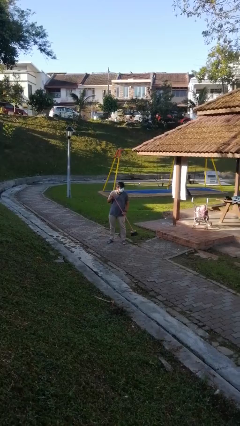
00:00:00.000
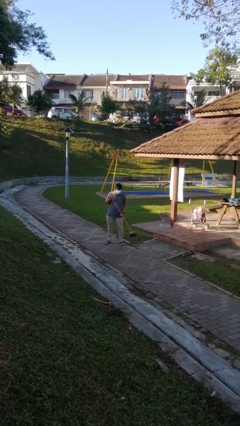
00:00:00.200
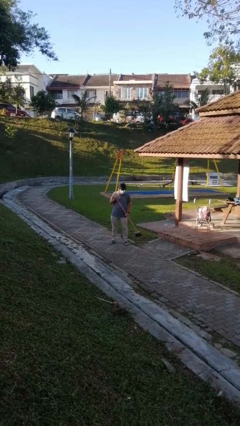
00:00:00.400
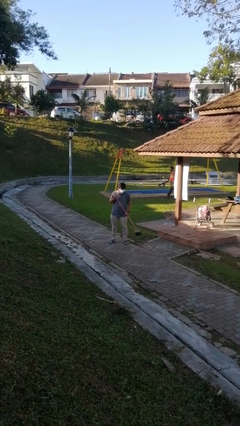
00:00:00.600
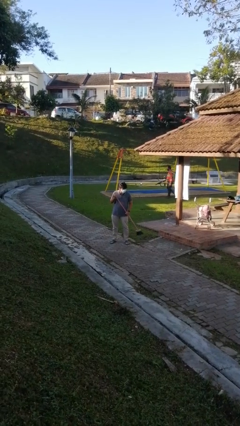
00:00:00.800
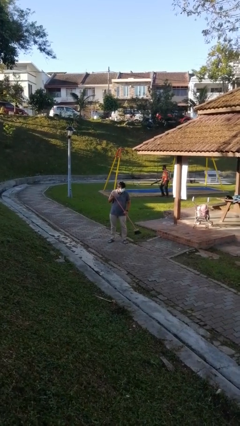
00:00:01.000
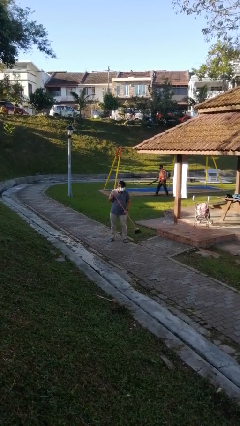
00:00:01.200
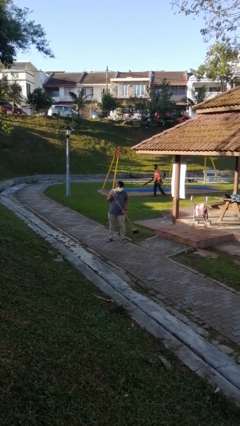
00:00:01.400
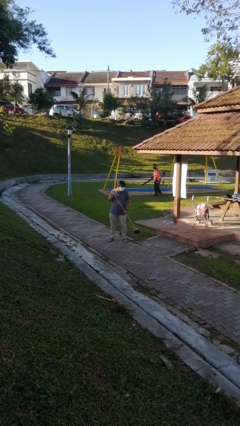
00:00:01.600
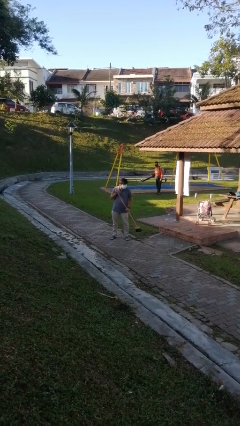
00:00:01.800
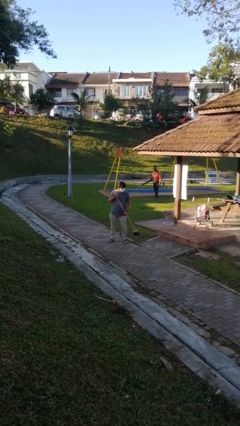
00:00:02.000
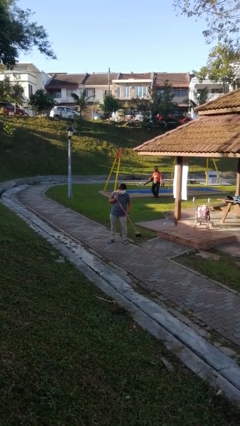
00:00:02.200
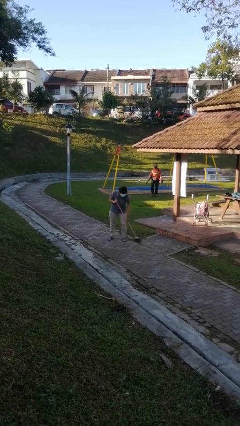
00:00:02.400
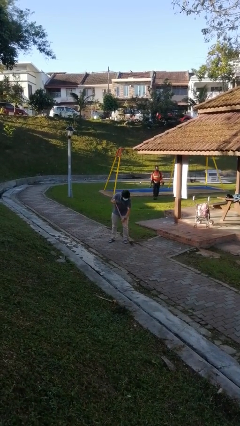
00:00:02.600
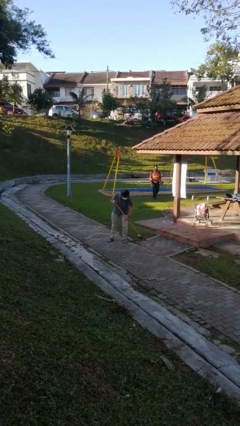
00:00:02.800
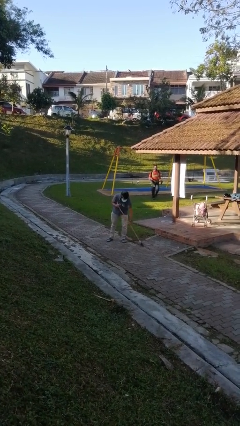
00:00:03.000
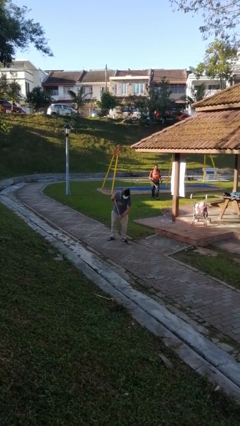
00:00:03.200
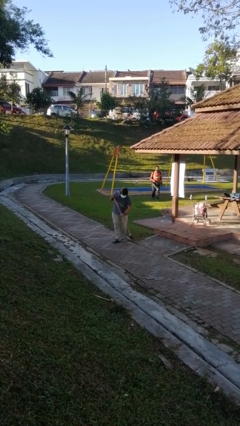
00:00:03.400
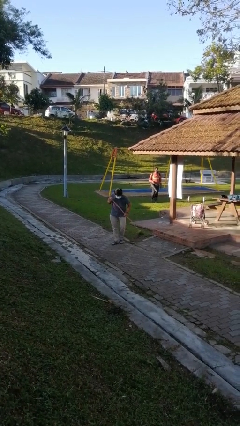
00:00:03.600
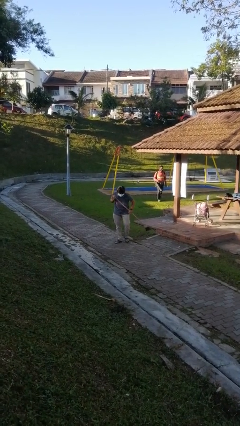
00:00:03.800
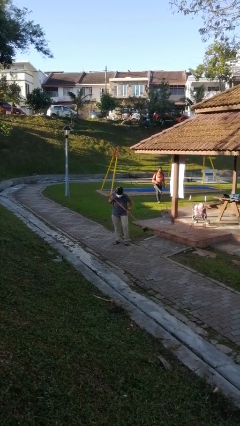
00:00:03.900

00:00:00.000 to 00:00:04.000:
person sweeps floor

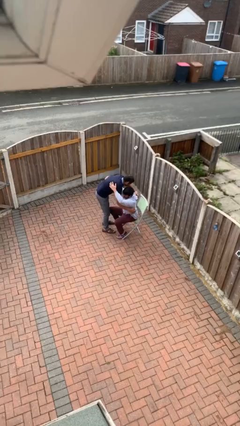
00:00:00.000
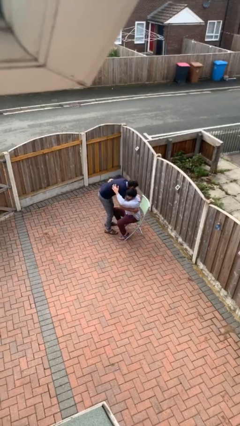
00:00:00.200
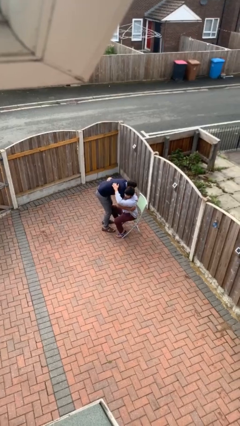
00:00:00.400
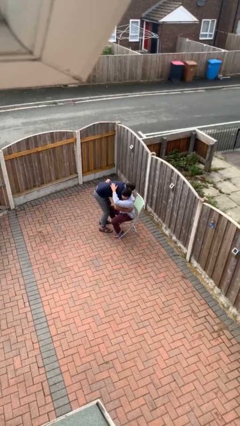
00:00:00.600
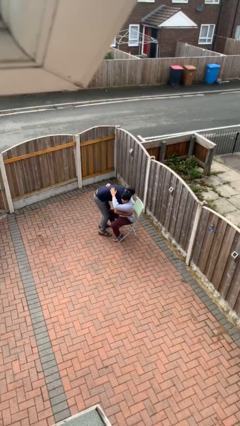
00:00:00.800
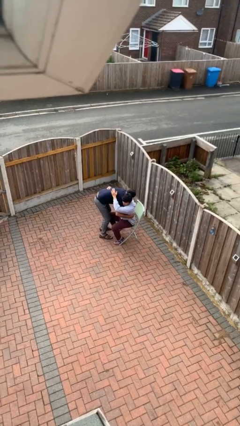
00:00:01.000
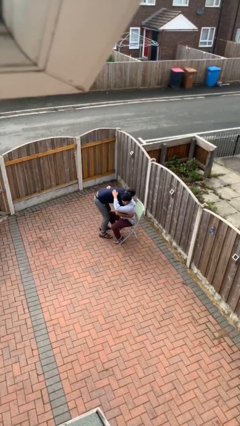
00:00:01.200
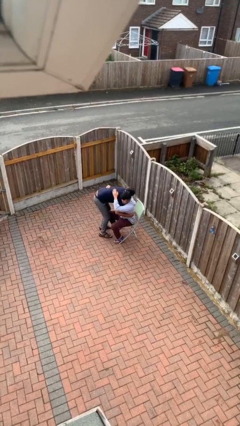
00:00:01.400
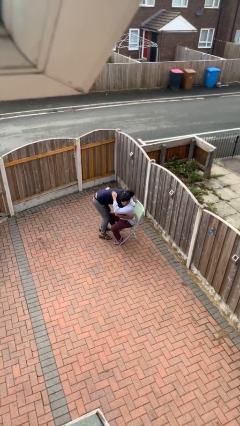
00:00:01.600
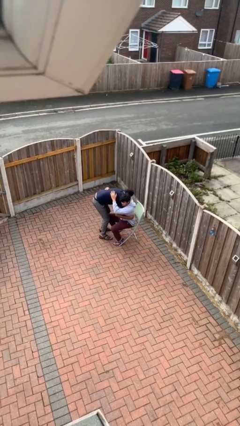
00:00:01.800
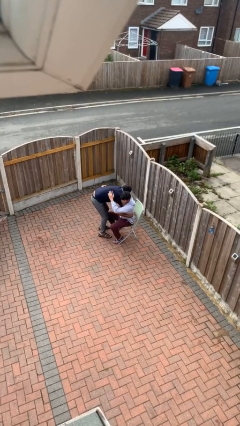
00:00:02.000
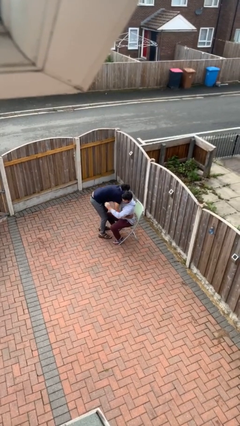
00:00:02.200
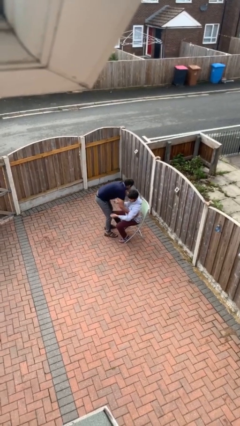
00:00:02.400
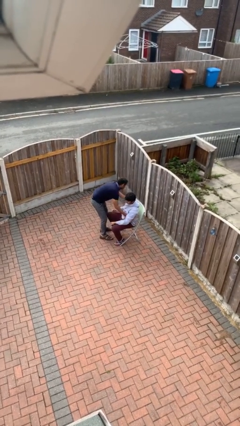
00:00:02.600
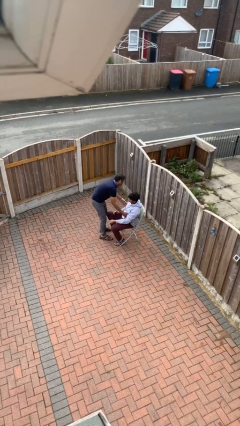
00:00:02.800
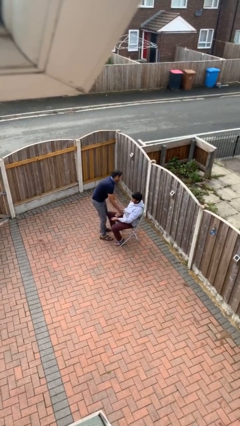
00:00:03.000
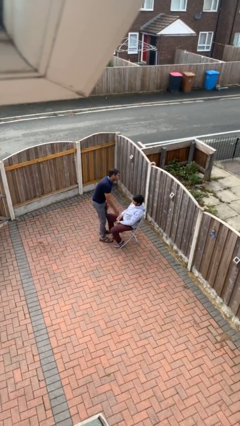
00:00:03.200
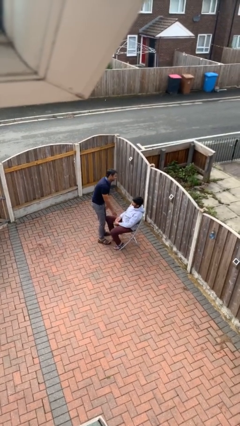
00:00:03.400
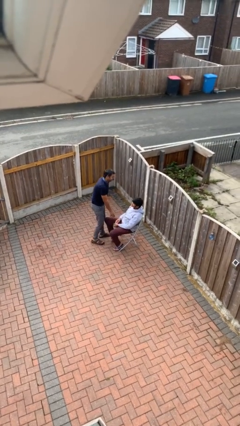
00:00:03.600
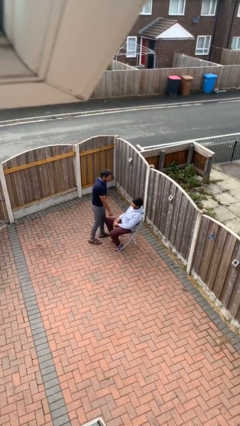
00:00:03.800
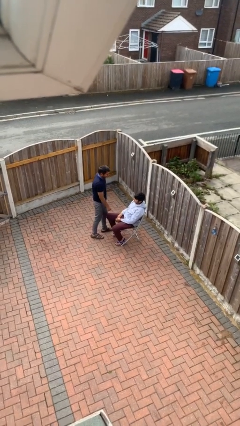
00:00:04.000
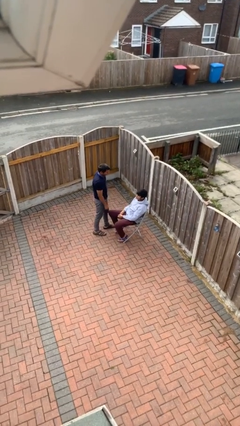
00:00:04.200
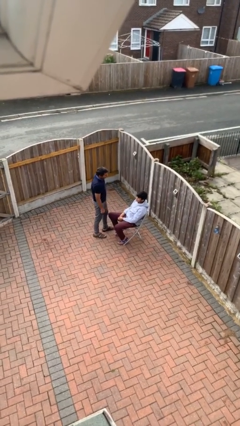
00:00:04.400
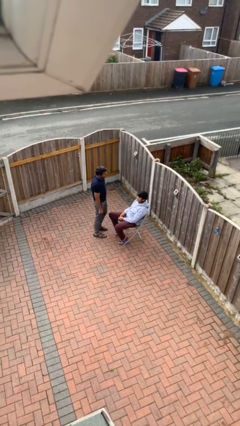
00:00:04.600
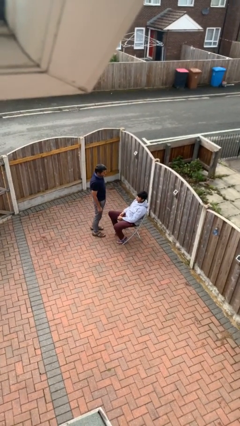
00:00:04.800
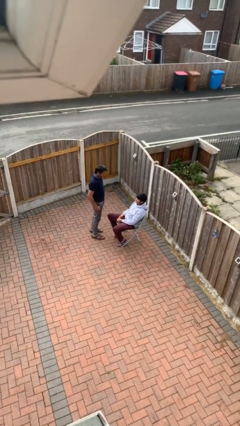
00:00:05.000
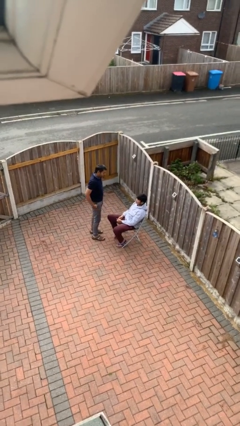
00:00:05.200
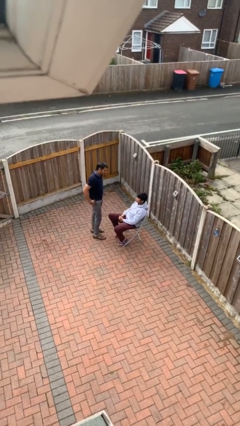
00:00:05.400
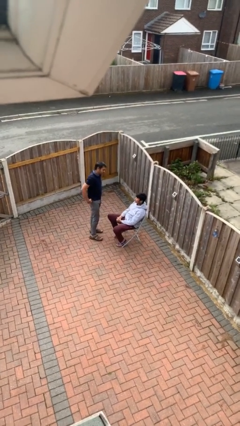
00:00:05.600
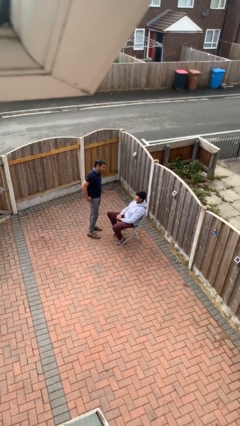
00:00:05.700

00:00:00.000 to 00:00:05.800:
person embraces person

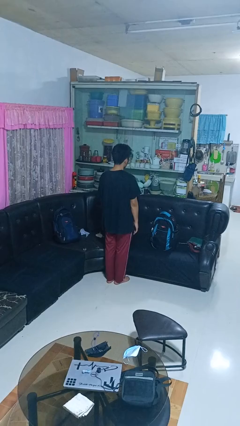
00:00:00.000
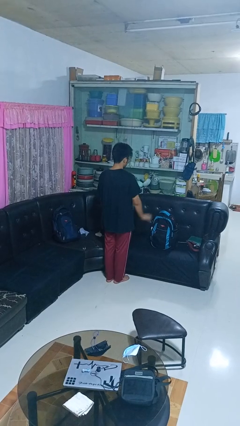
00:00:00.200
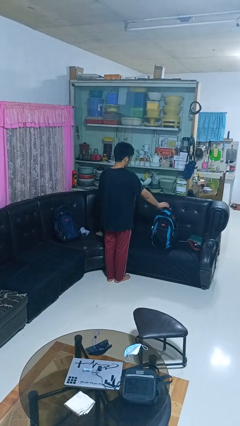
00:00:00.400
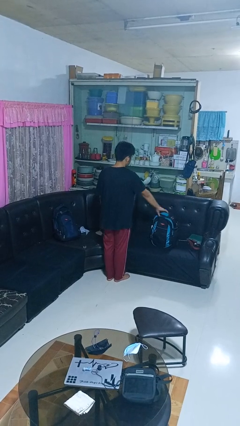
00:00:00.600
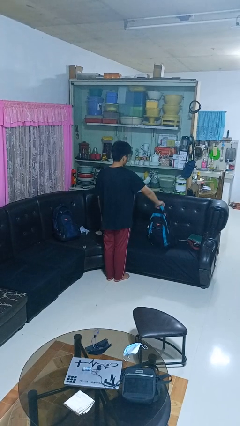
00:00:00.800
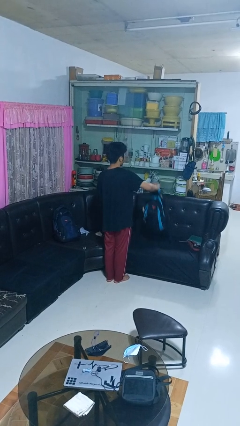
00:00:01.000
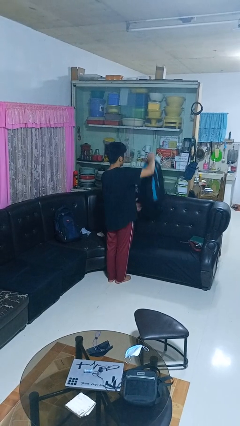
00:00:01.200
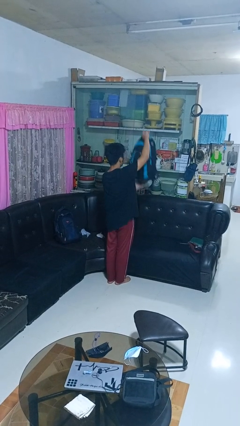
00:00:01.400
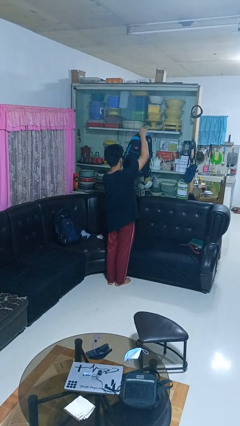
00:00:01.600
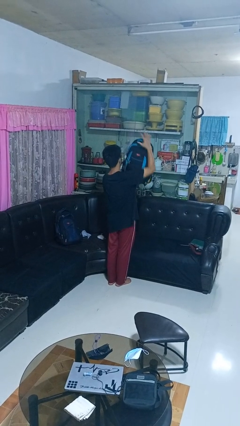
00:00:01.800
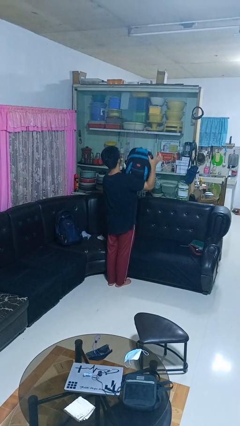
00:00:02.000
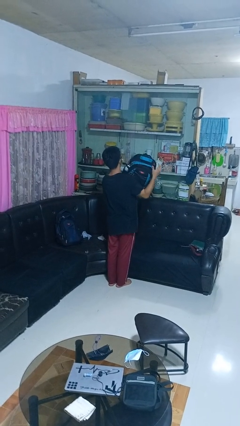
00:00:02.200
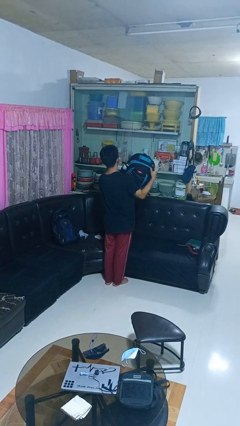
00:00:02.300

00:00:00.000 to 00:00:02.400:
person picks up object from couch

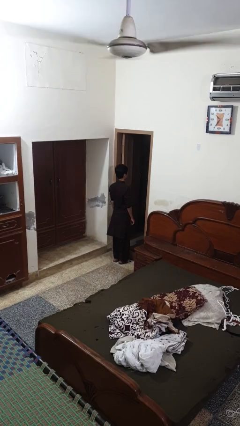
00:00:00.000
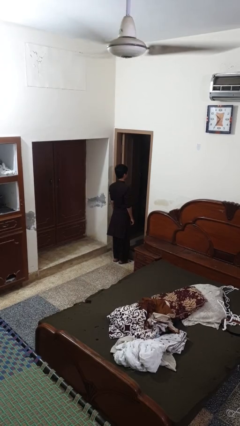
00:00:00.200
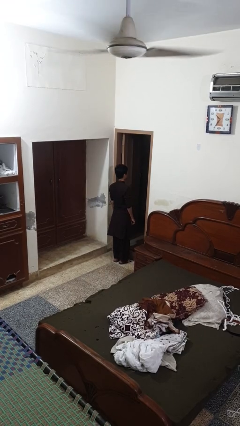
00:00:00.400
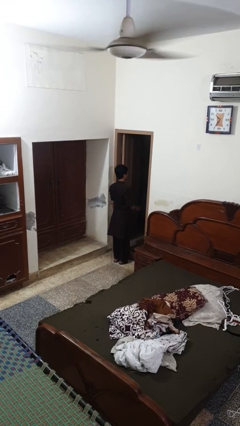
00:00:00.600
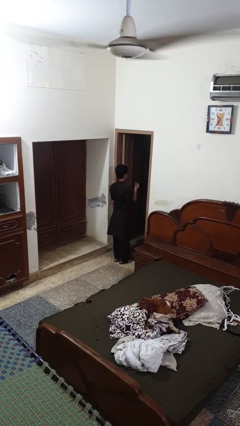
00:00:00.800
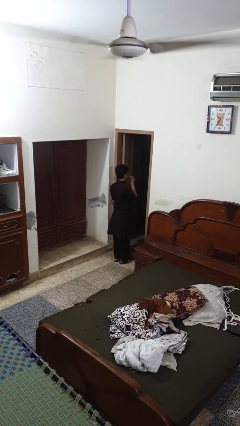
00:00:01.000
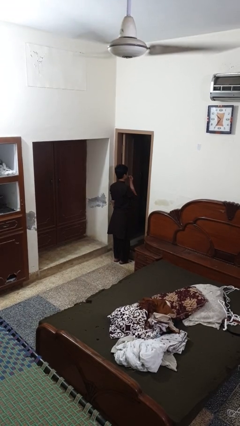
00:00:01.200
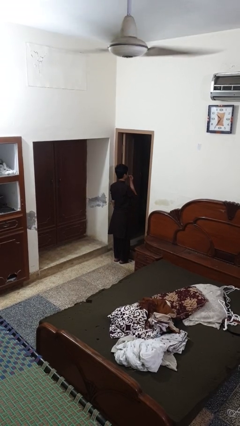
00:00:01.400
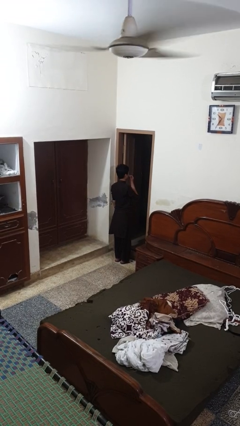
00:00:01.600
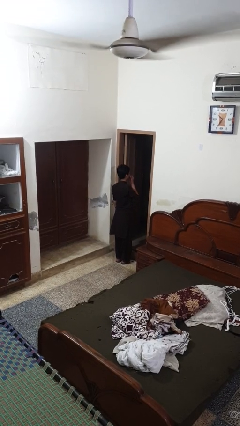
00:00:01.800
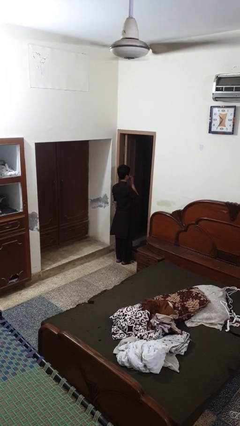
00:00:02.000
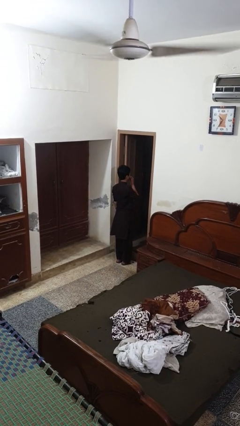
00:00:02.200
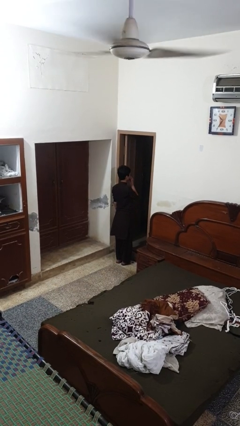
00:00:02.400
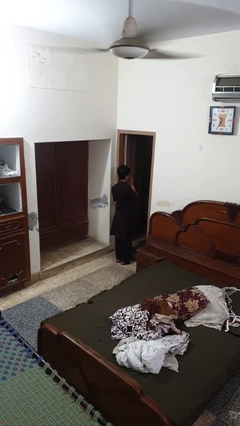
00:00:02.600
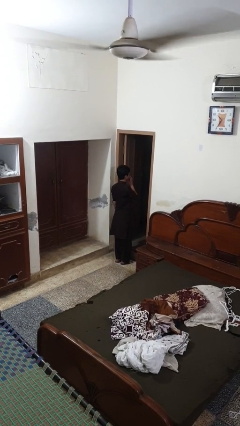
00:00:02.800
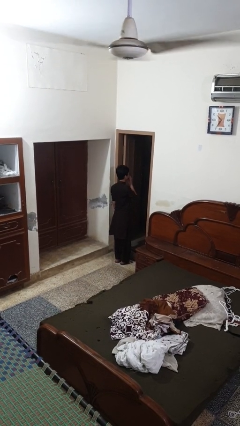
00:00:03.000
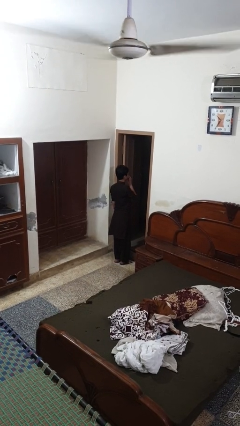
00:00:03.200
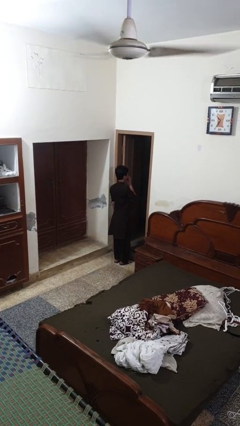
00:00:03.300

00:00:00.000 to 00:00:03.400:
person flosses

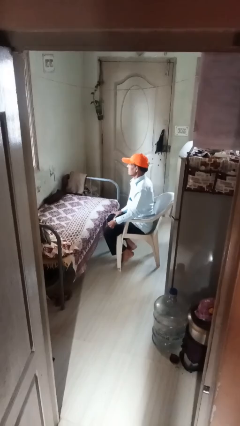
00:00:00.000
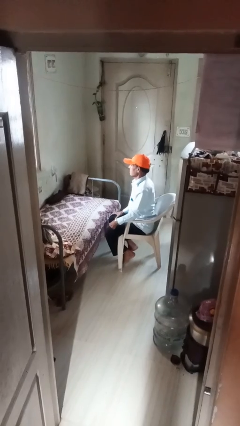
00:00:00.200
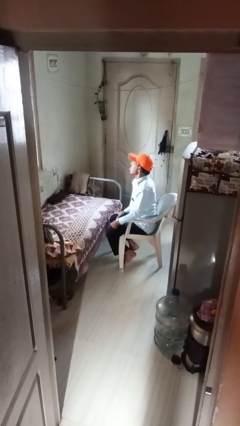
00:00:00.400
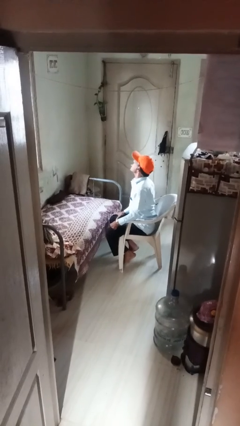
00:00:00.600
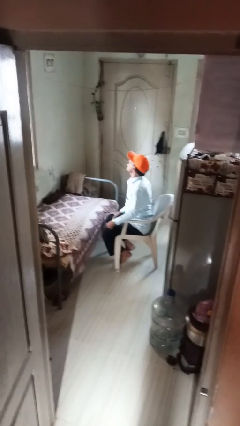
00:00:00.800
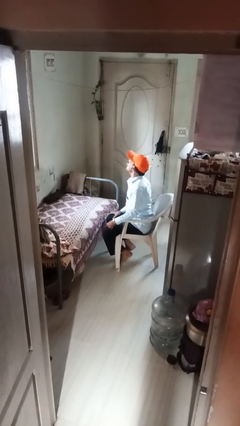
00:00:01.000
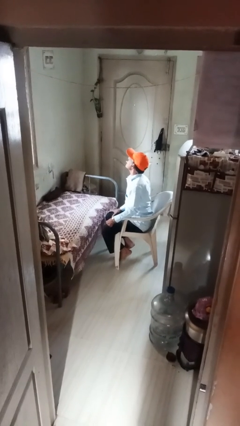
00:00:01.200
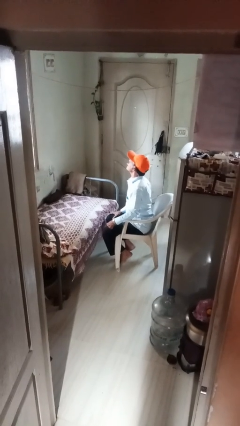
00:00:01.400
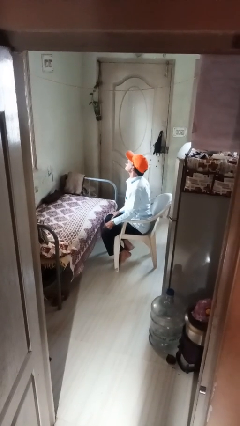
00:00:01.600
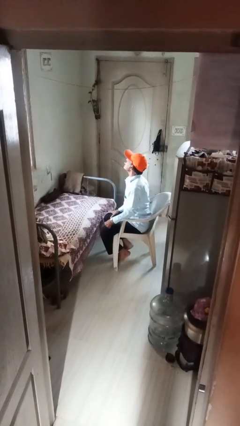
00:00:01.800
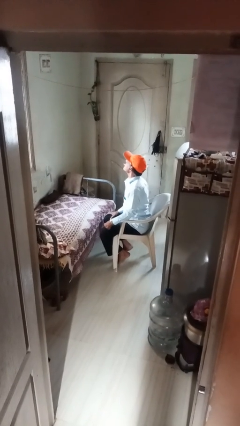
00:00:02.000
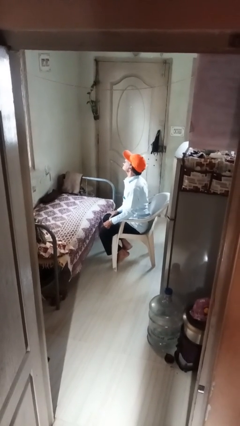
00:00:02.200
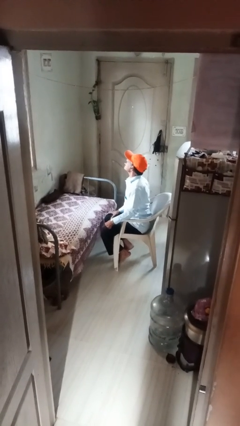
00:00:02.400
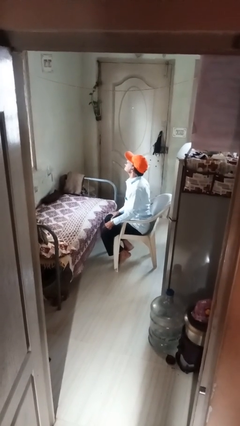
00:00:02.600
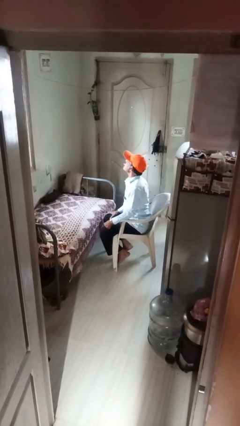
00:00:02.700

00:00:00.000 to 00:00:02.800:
person sticks out tongue
